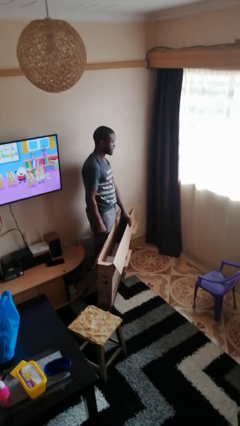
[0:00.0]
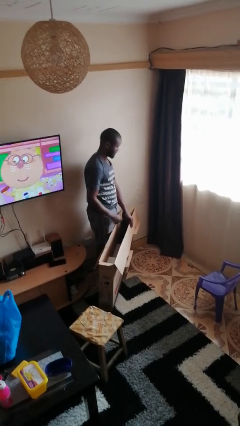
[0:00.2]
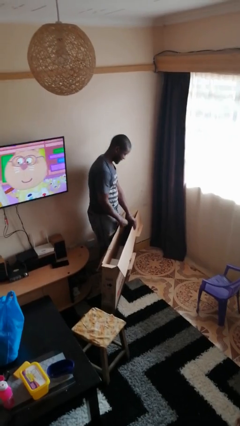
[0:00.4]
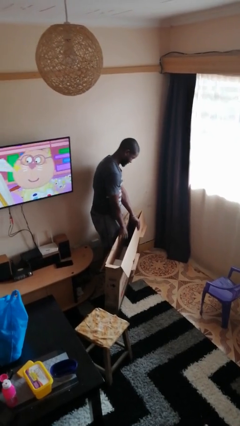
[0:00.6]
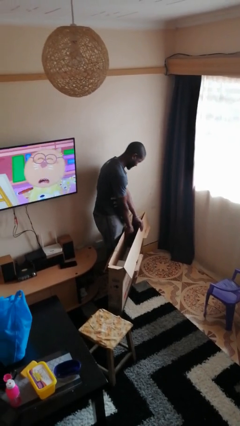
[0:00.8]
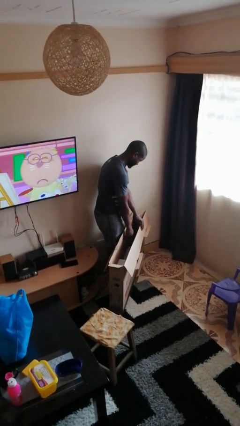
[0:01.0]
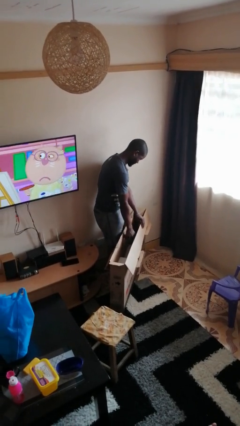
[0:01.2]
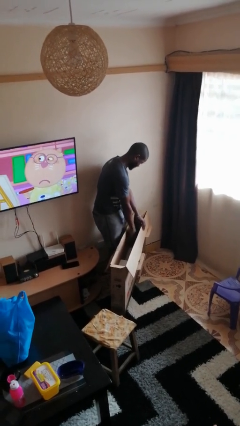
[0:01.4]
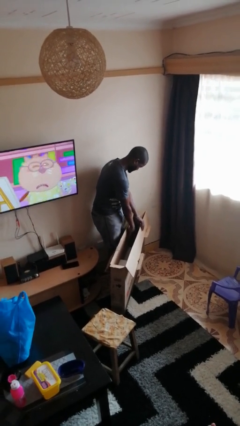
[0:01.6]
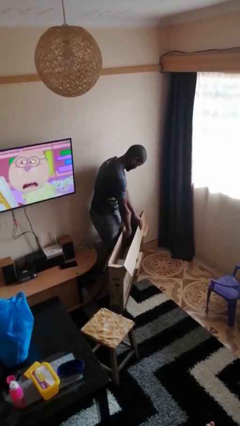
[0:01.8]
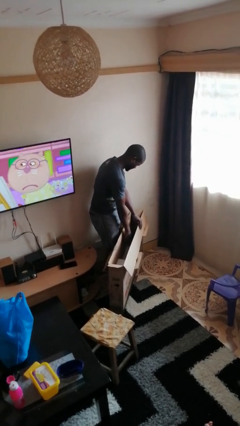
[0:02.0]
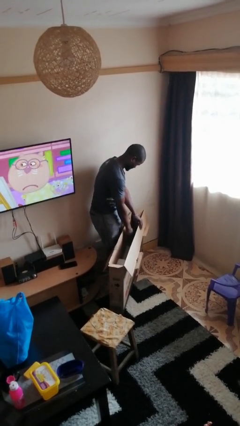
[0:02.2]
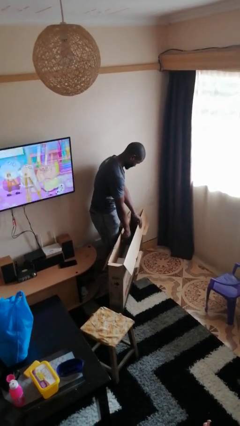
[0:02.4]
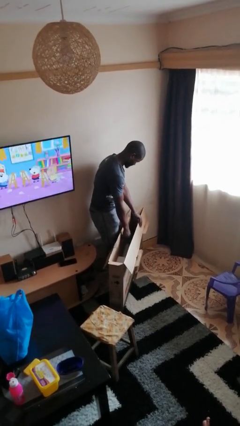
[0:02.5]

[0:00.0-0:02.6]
person searches in box

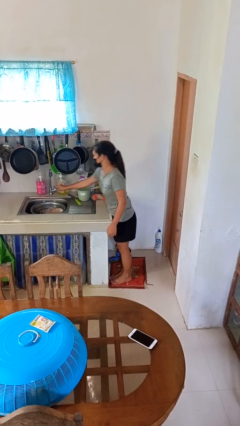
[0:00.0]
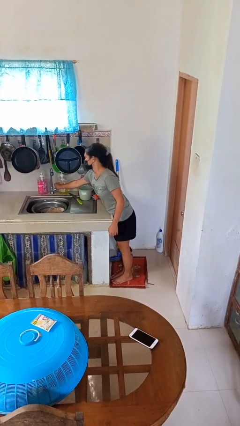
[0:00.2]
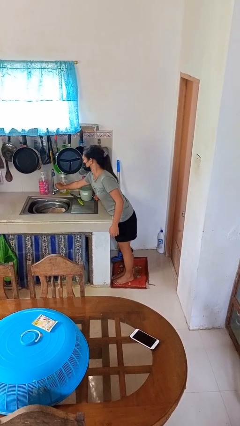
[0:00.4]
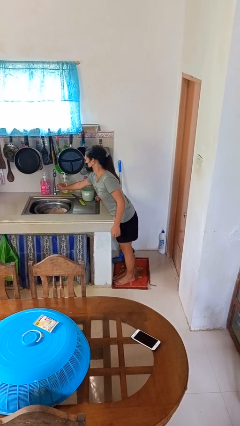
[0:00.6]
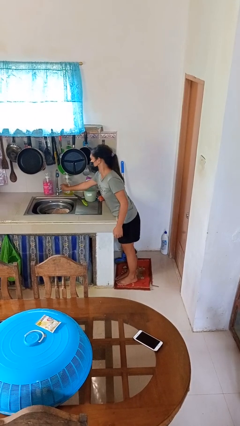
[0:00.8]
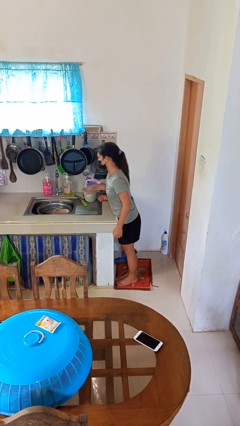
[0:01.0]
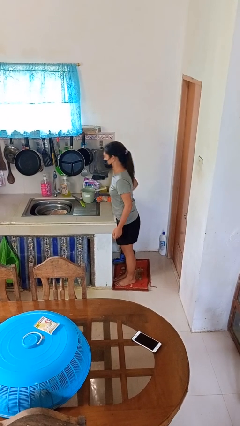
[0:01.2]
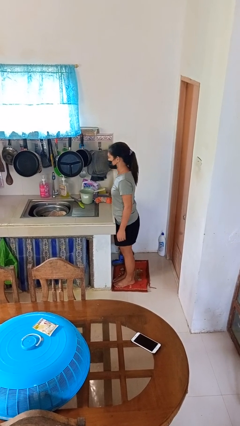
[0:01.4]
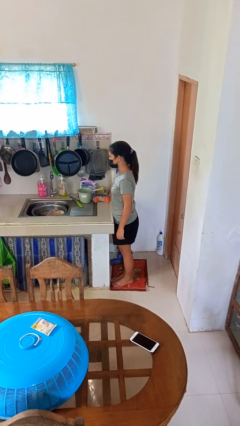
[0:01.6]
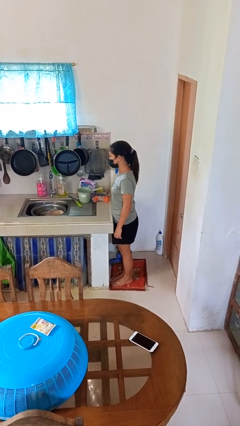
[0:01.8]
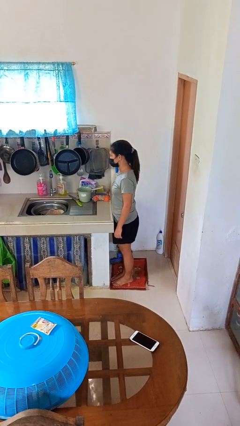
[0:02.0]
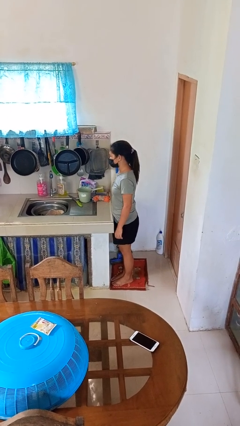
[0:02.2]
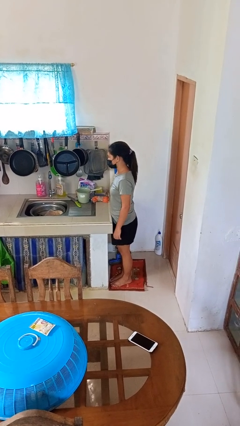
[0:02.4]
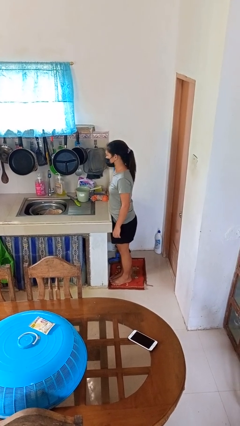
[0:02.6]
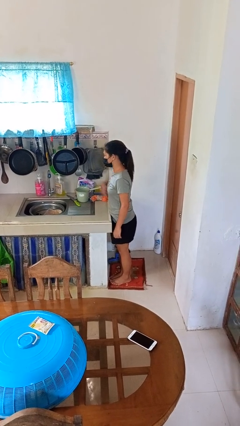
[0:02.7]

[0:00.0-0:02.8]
person turns on faucet

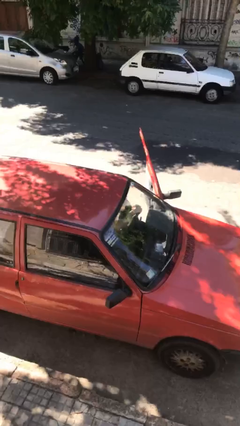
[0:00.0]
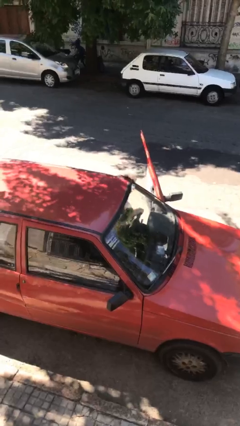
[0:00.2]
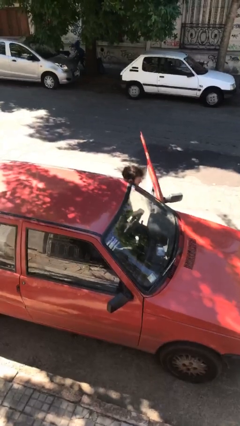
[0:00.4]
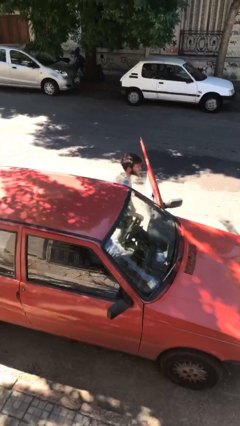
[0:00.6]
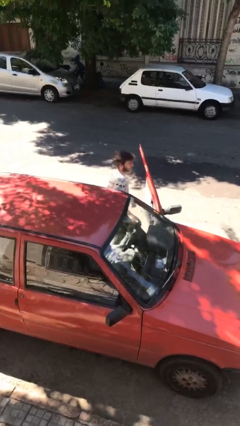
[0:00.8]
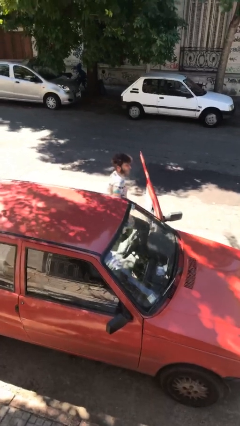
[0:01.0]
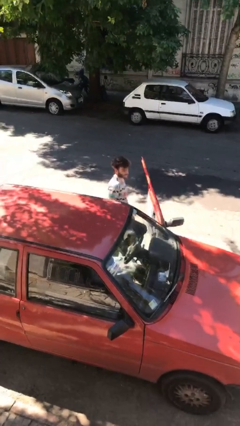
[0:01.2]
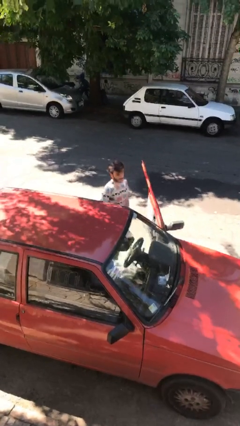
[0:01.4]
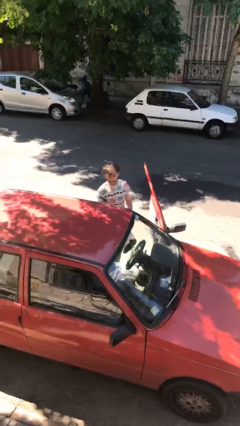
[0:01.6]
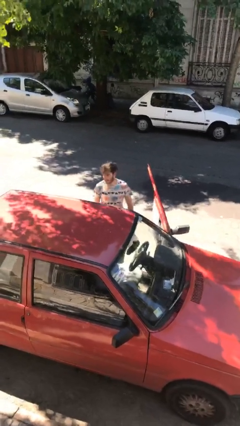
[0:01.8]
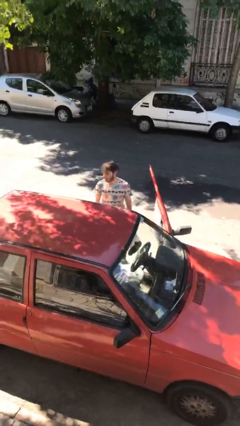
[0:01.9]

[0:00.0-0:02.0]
person exits car

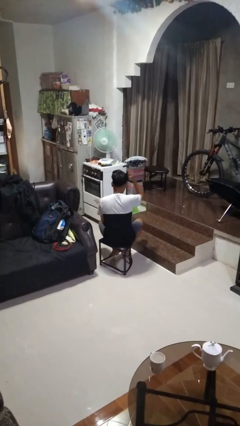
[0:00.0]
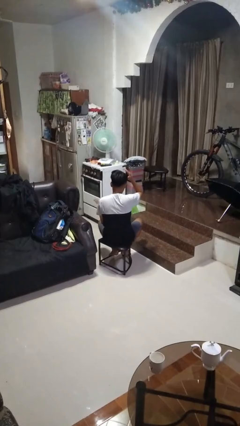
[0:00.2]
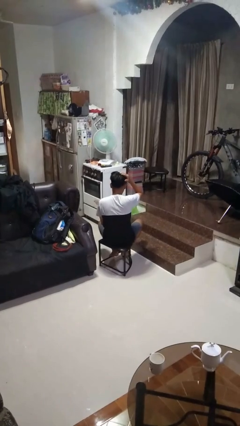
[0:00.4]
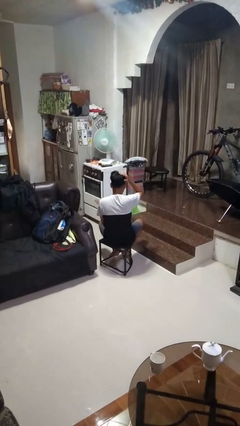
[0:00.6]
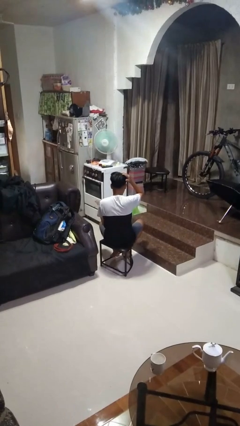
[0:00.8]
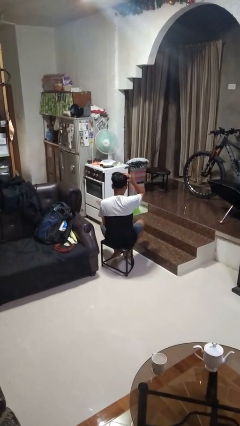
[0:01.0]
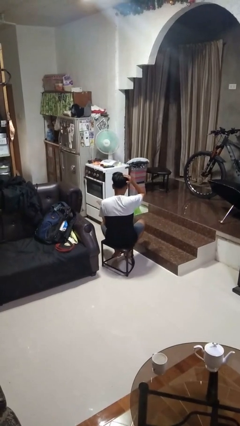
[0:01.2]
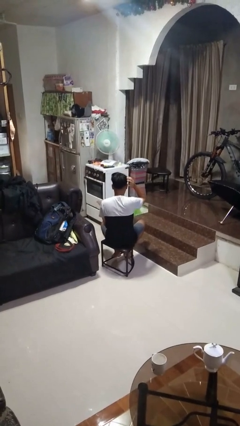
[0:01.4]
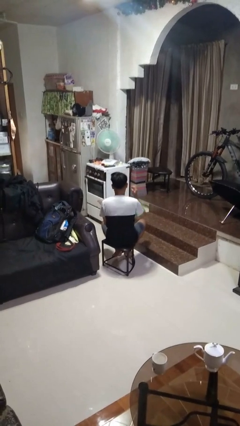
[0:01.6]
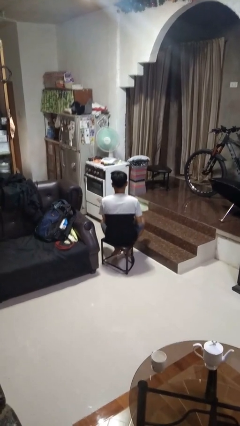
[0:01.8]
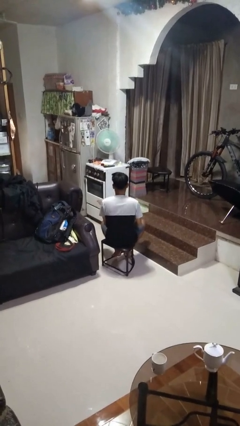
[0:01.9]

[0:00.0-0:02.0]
person pats head

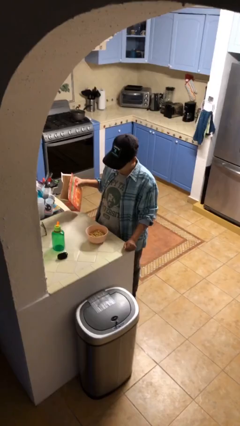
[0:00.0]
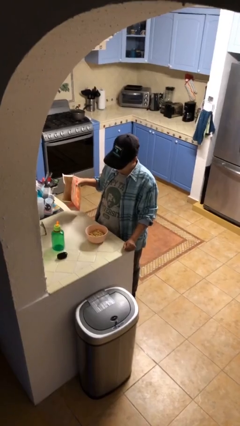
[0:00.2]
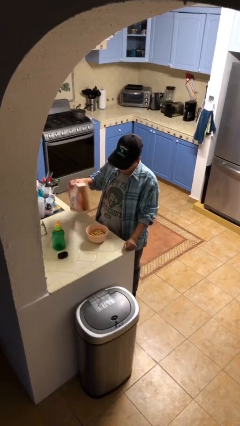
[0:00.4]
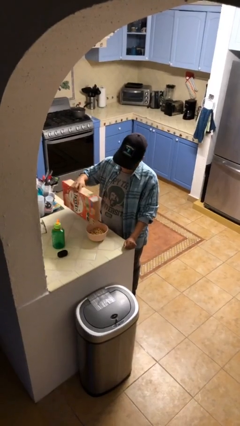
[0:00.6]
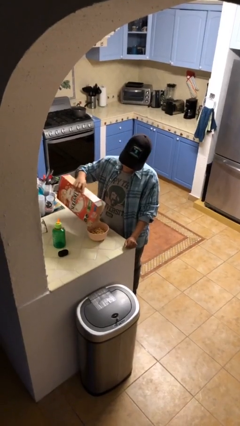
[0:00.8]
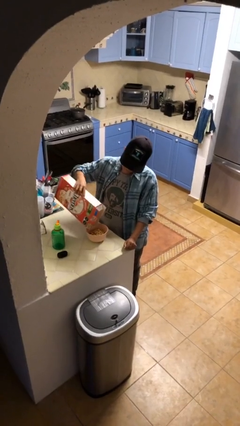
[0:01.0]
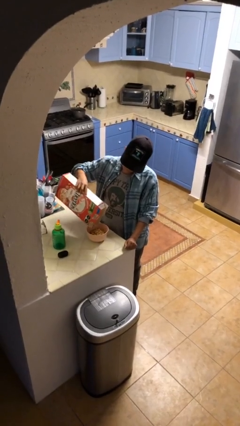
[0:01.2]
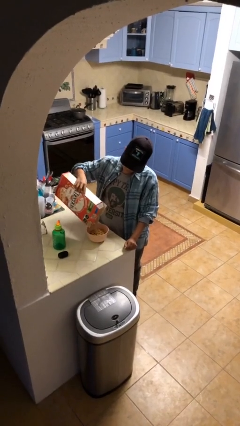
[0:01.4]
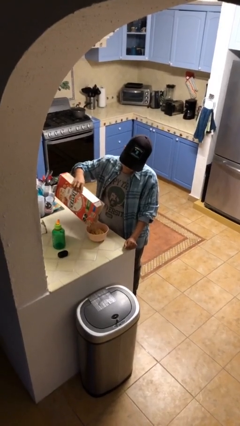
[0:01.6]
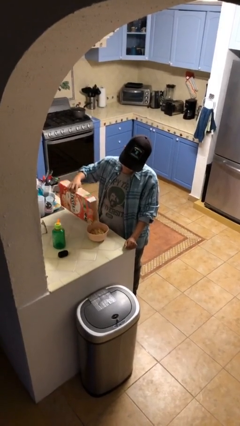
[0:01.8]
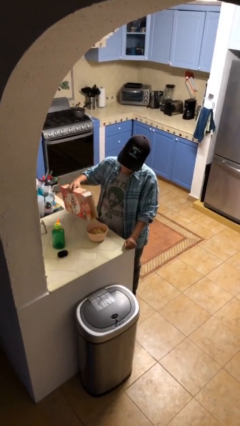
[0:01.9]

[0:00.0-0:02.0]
person pours into bowl

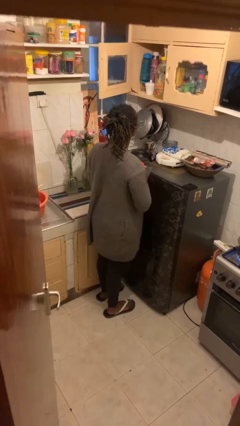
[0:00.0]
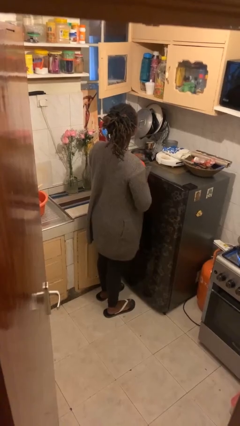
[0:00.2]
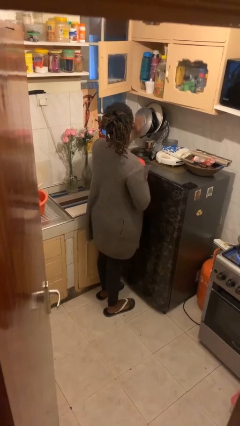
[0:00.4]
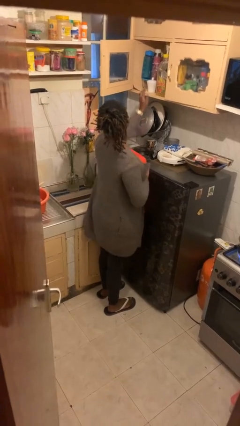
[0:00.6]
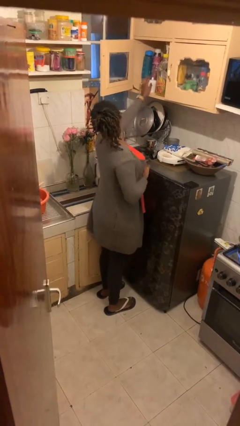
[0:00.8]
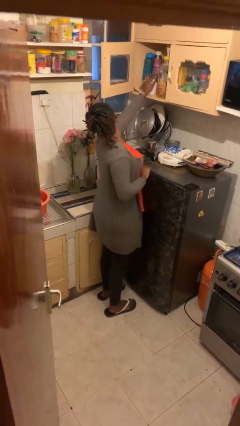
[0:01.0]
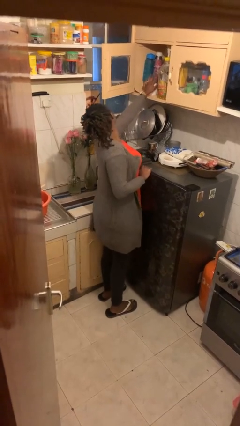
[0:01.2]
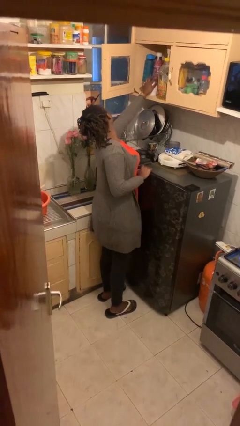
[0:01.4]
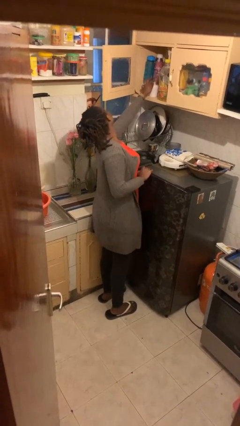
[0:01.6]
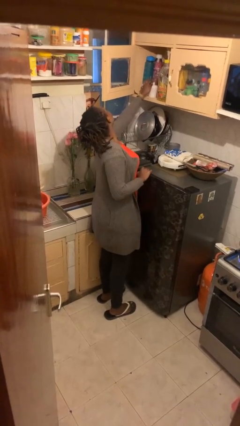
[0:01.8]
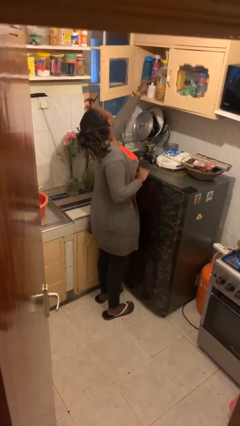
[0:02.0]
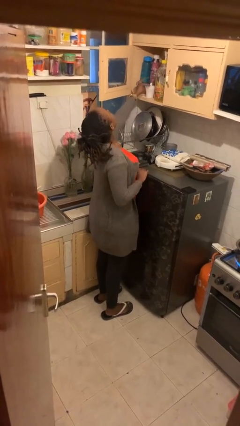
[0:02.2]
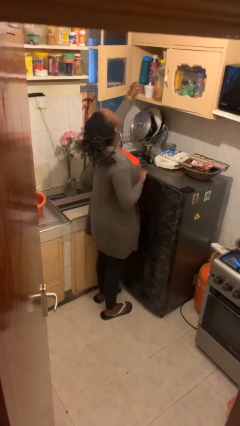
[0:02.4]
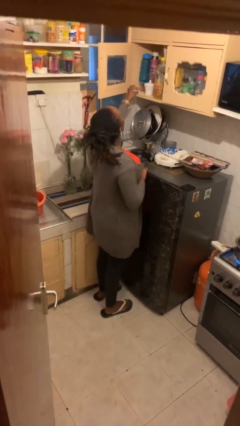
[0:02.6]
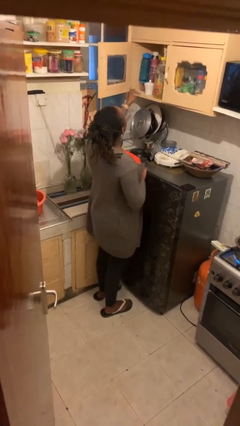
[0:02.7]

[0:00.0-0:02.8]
person searches in cabinet

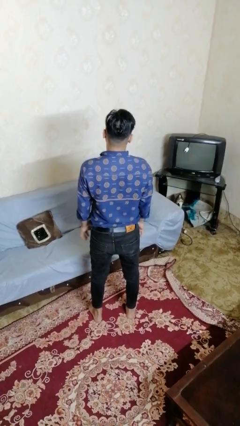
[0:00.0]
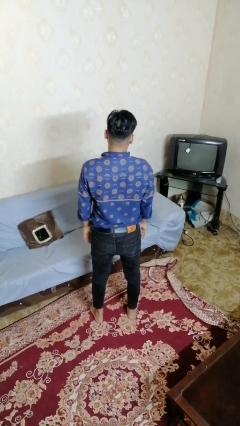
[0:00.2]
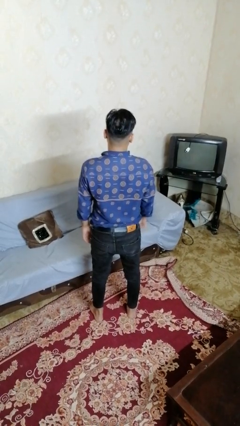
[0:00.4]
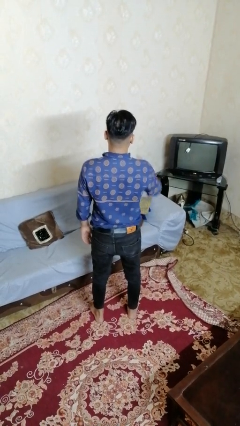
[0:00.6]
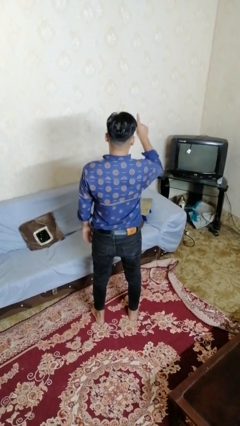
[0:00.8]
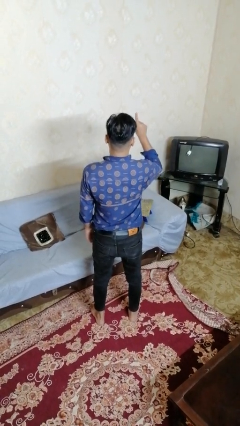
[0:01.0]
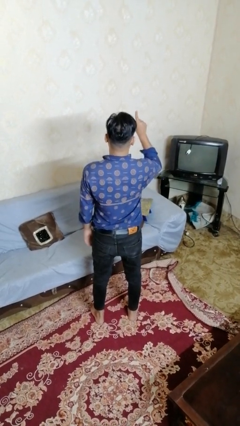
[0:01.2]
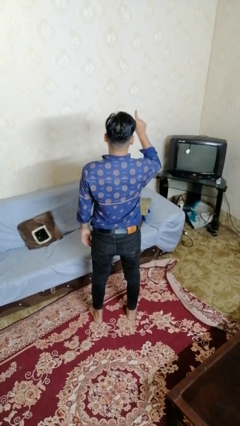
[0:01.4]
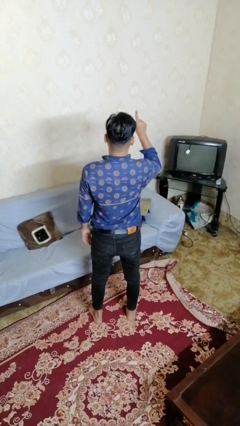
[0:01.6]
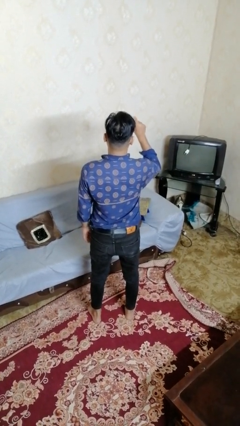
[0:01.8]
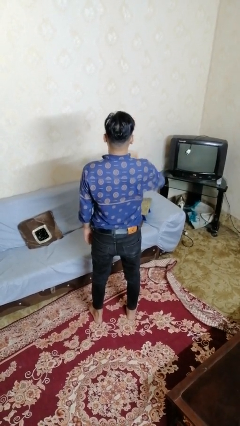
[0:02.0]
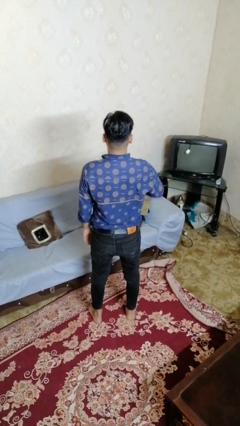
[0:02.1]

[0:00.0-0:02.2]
person gestures number one

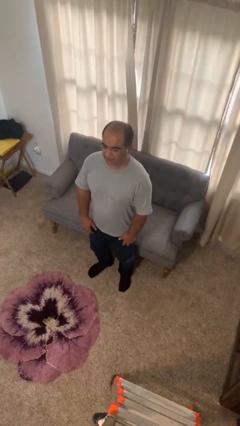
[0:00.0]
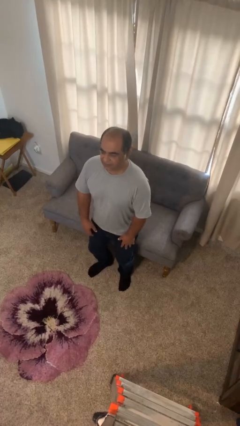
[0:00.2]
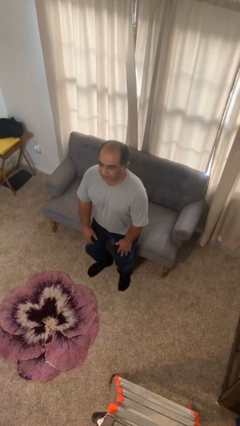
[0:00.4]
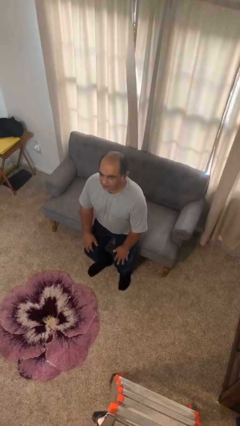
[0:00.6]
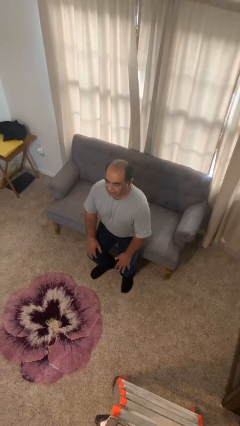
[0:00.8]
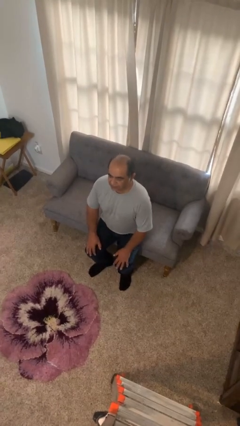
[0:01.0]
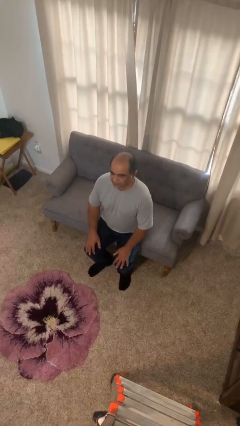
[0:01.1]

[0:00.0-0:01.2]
person sits down
